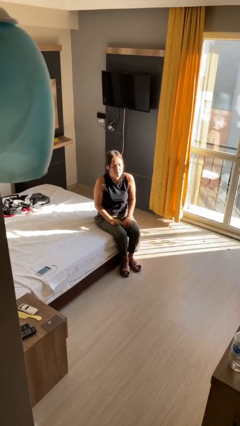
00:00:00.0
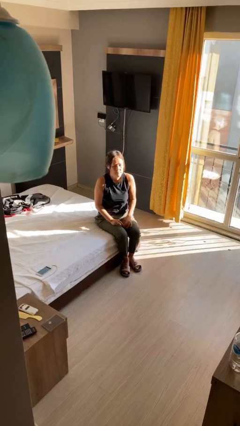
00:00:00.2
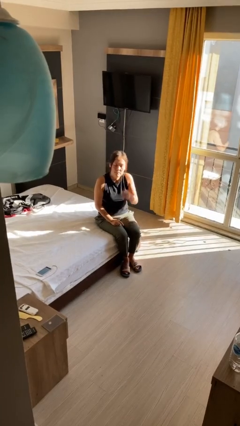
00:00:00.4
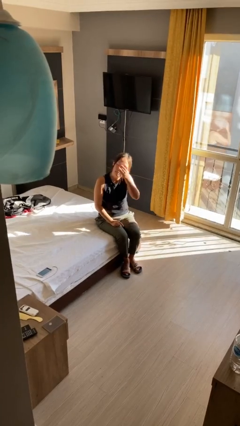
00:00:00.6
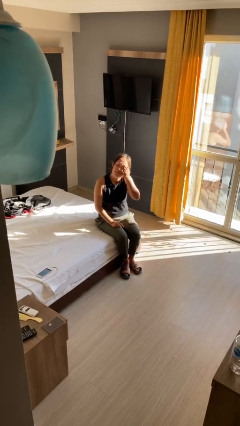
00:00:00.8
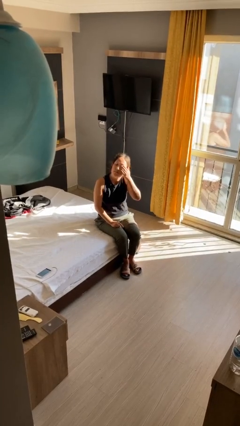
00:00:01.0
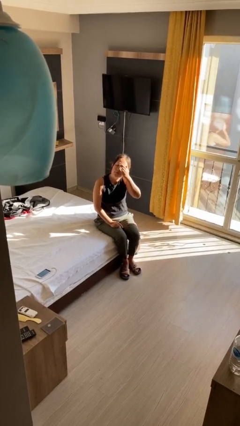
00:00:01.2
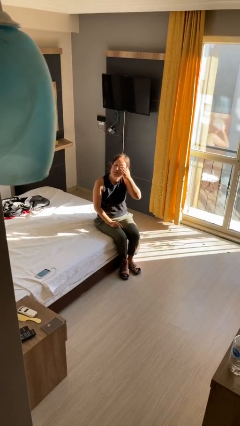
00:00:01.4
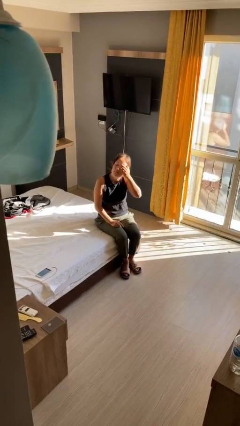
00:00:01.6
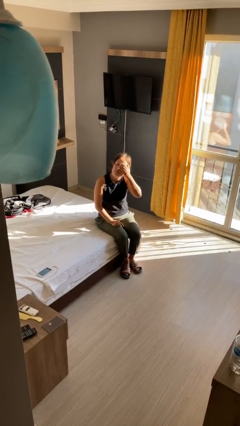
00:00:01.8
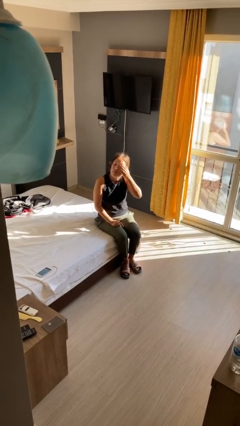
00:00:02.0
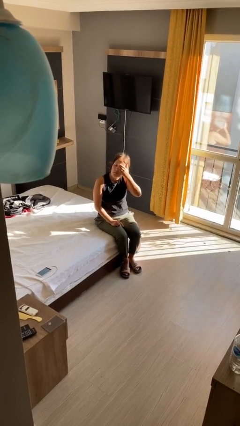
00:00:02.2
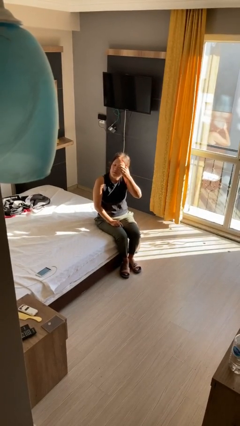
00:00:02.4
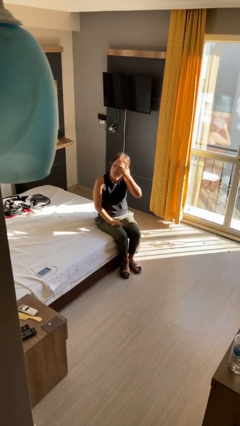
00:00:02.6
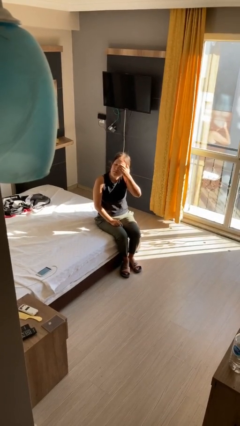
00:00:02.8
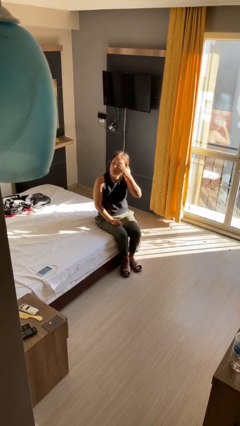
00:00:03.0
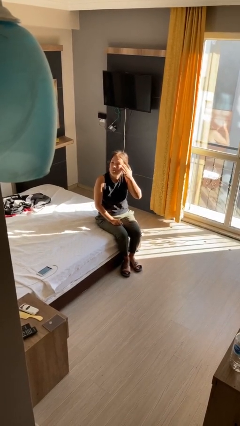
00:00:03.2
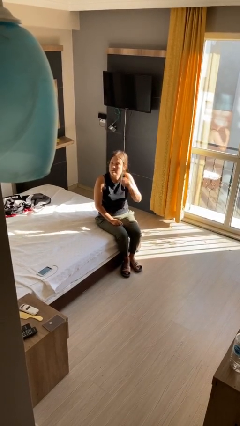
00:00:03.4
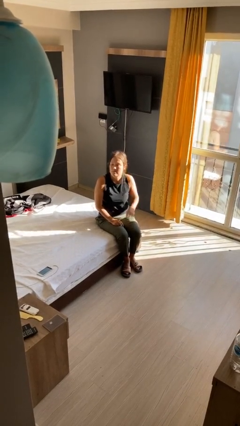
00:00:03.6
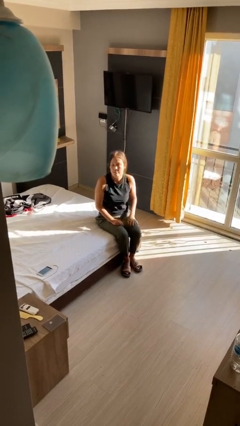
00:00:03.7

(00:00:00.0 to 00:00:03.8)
person rubs eyes

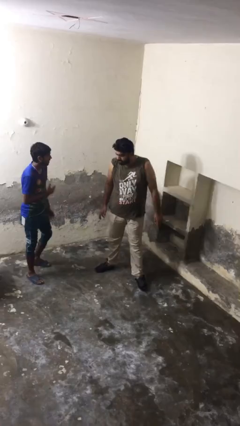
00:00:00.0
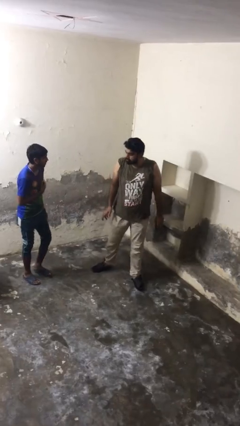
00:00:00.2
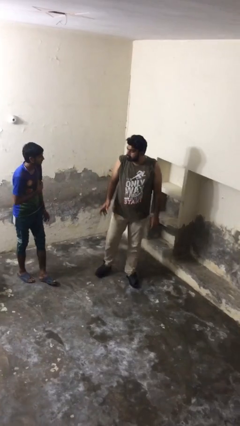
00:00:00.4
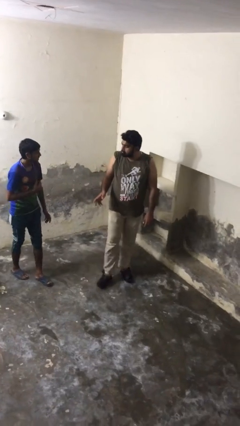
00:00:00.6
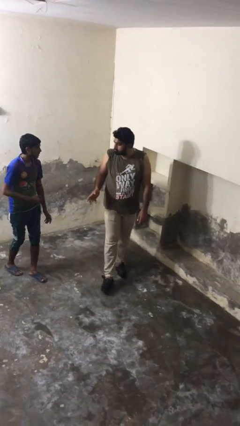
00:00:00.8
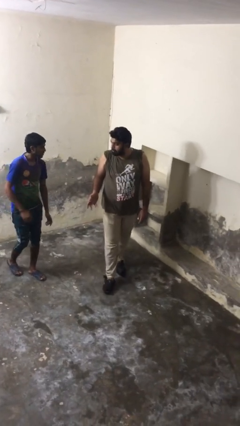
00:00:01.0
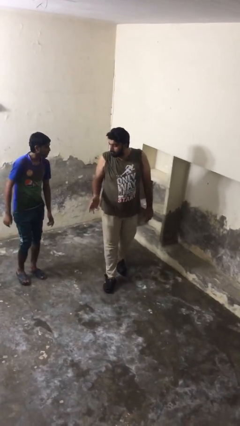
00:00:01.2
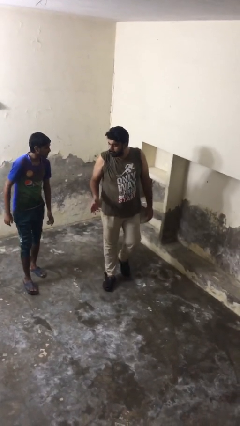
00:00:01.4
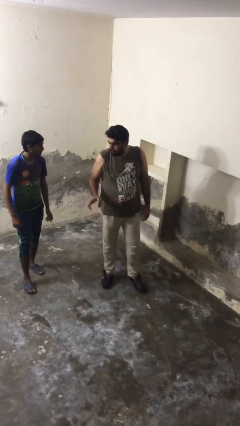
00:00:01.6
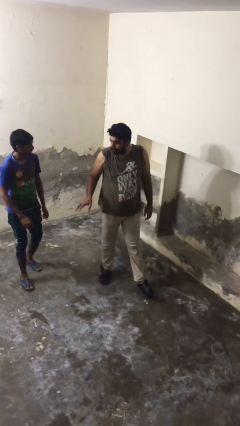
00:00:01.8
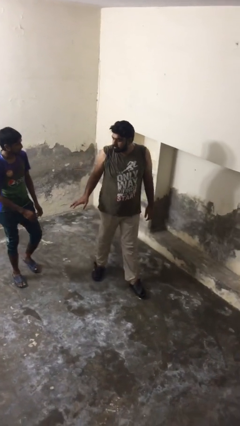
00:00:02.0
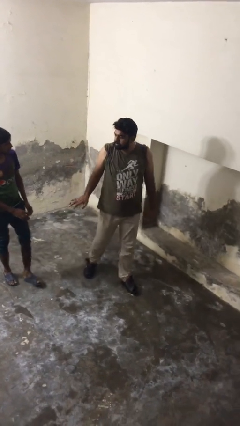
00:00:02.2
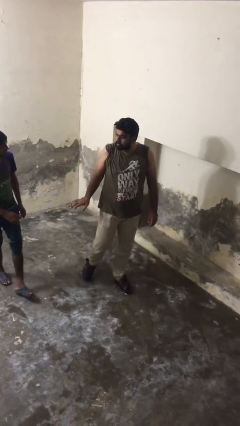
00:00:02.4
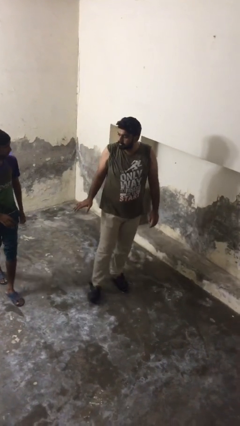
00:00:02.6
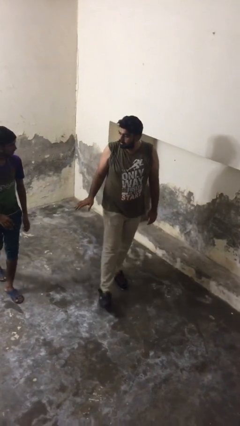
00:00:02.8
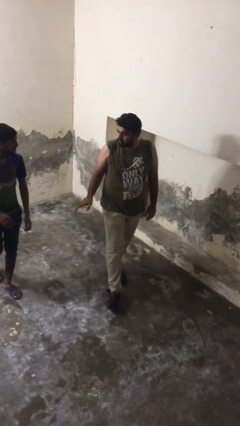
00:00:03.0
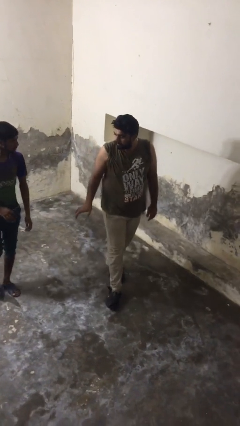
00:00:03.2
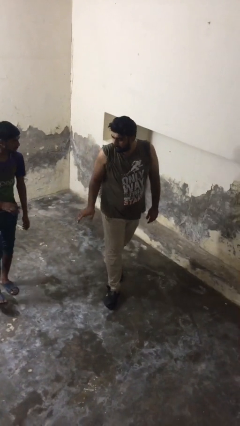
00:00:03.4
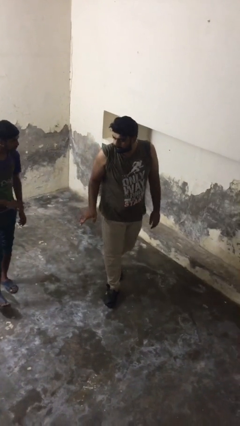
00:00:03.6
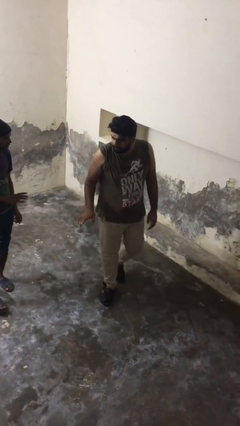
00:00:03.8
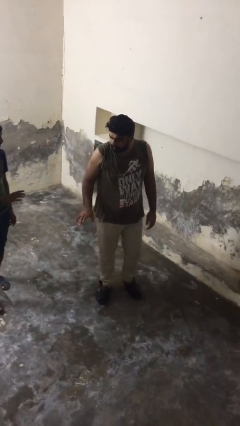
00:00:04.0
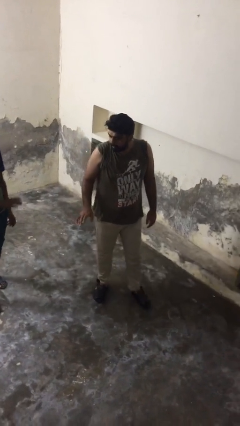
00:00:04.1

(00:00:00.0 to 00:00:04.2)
person talks to person

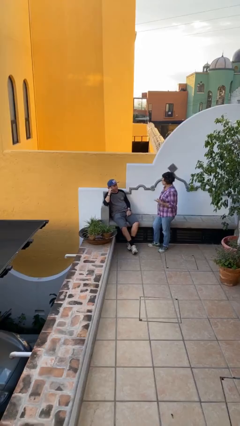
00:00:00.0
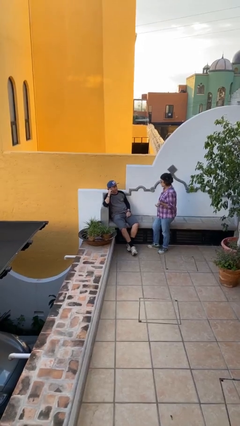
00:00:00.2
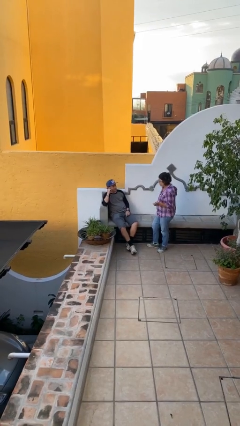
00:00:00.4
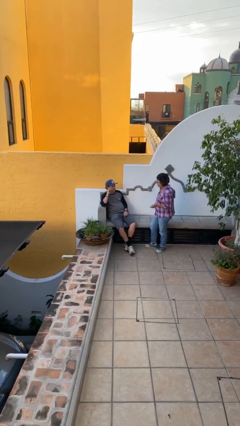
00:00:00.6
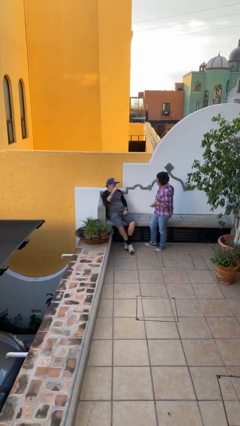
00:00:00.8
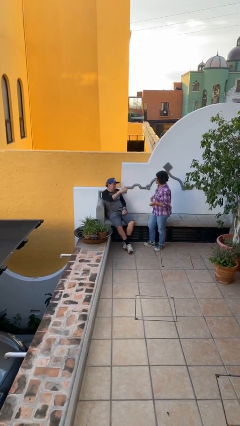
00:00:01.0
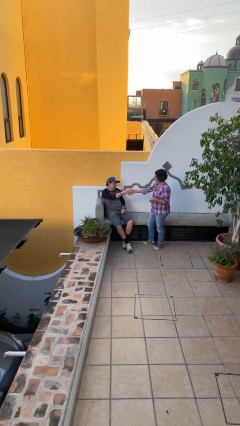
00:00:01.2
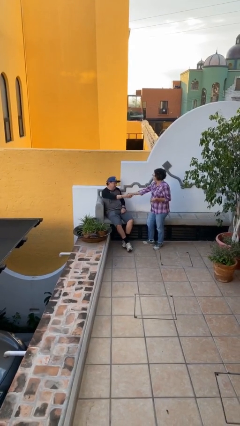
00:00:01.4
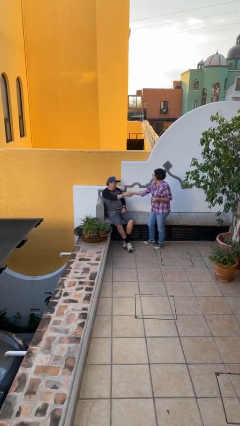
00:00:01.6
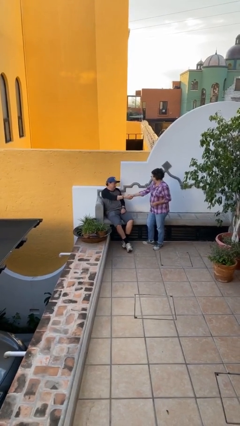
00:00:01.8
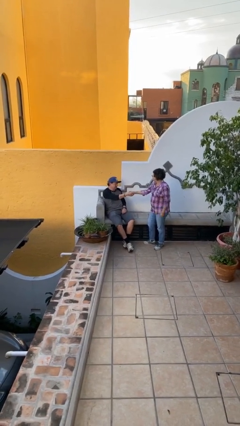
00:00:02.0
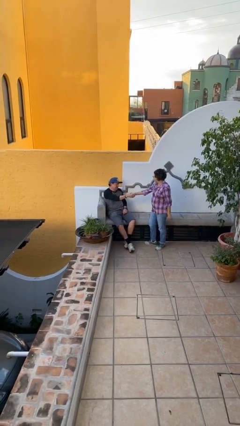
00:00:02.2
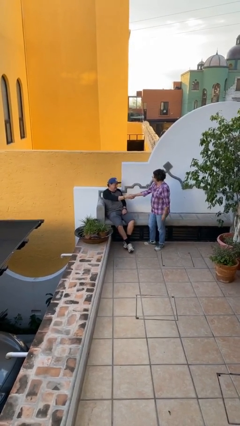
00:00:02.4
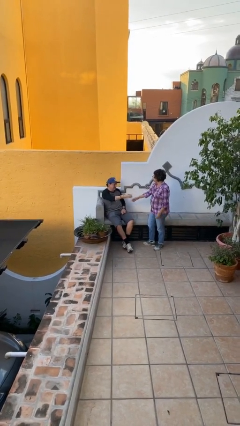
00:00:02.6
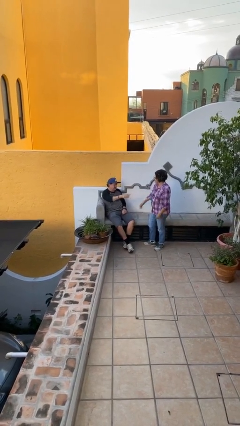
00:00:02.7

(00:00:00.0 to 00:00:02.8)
person shakes hand

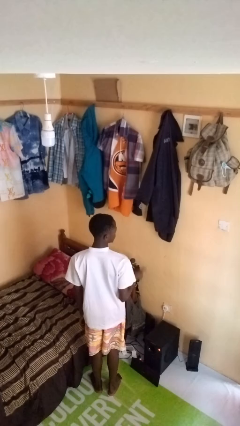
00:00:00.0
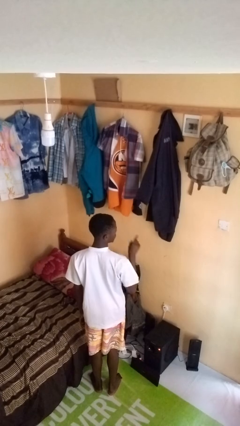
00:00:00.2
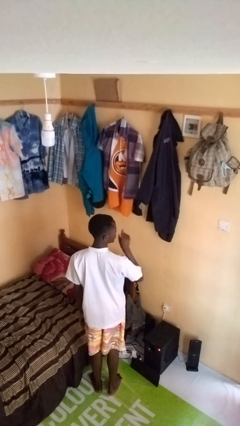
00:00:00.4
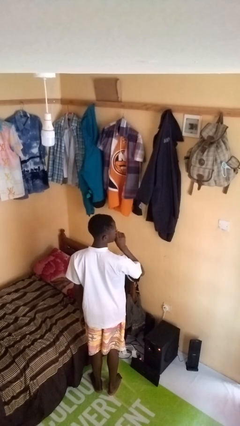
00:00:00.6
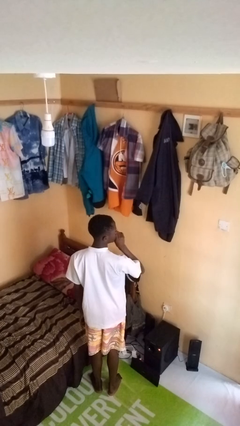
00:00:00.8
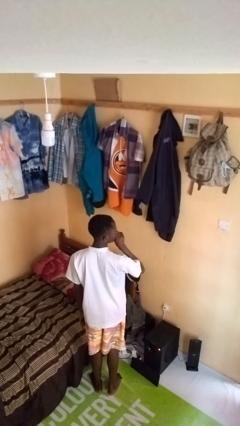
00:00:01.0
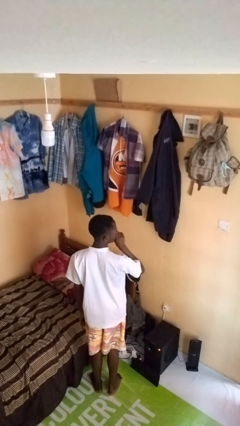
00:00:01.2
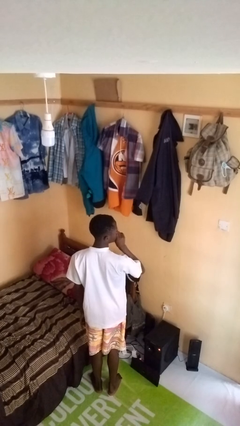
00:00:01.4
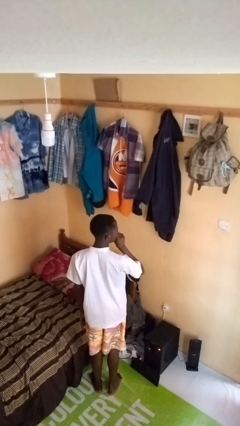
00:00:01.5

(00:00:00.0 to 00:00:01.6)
person gestures be quiet

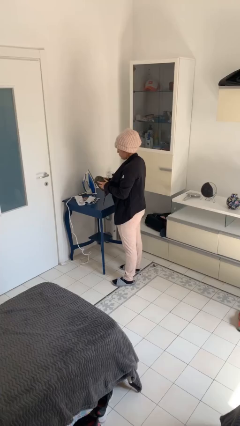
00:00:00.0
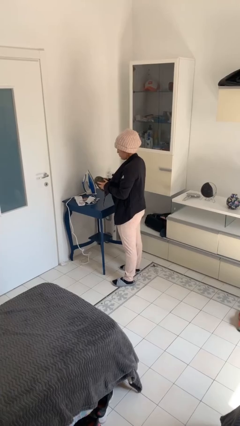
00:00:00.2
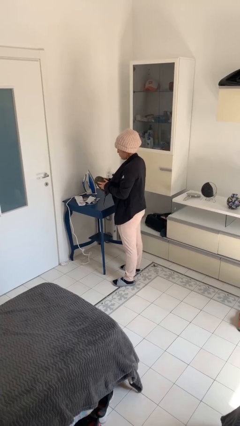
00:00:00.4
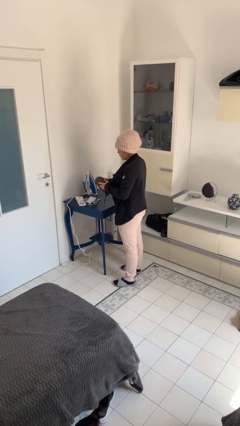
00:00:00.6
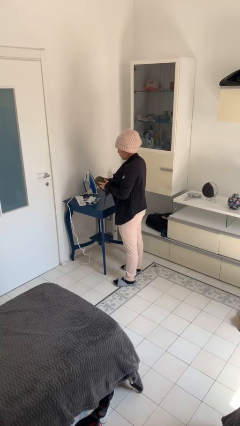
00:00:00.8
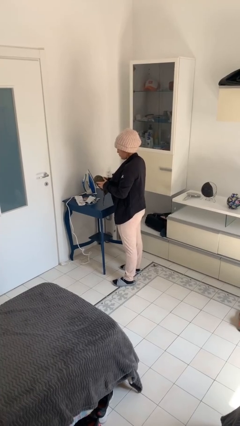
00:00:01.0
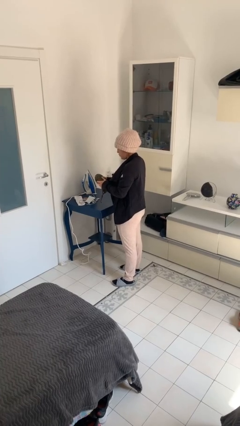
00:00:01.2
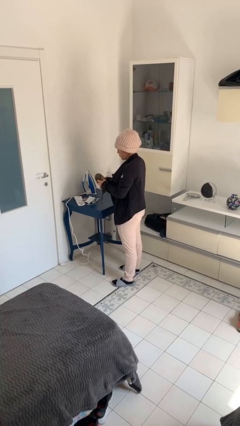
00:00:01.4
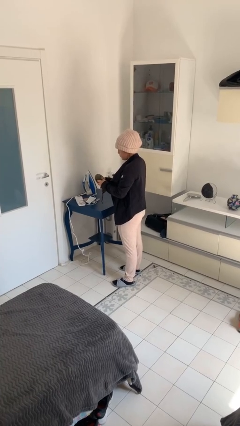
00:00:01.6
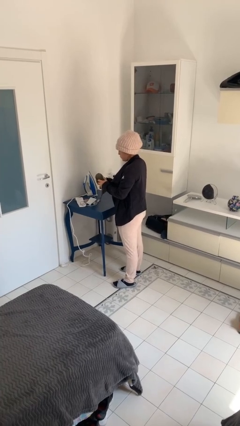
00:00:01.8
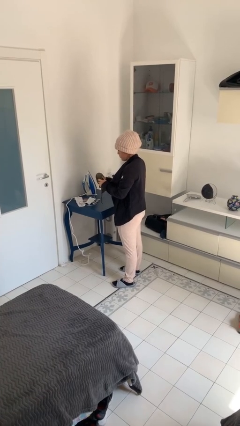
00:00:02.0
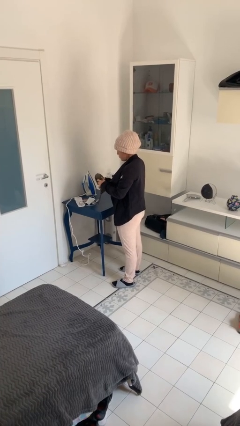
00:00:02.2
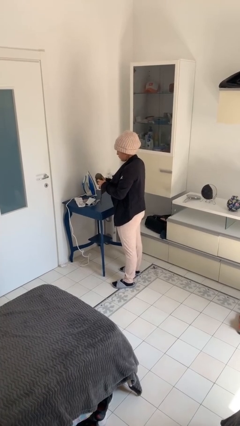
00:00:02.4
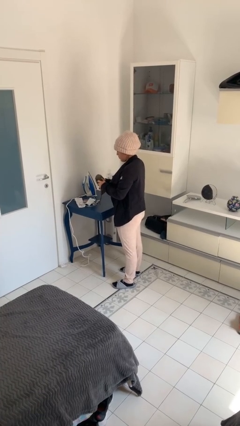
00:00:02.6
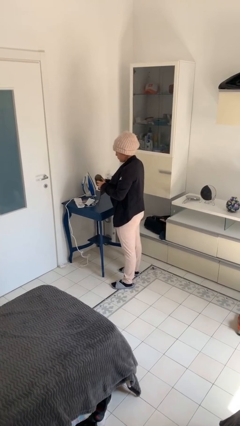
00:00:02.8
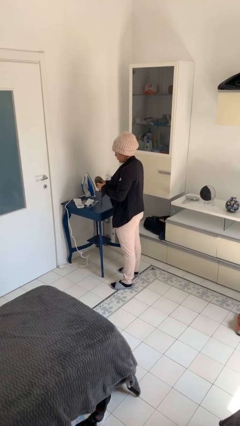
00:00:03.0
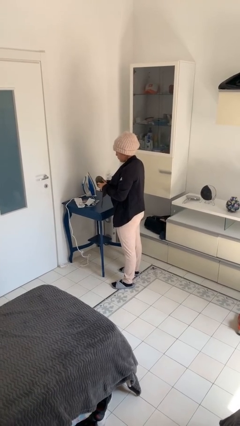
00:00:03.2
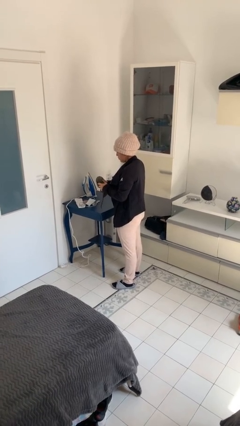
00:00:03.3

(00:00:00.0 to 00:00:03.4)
person squeezes object

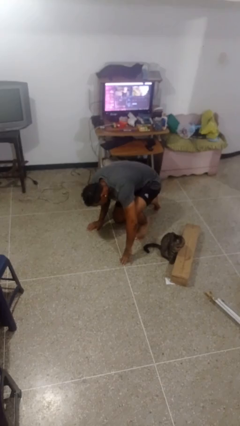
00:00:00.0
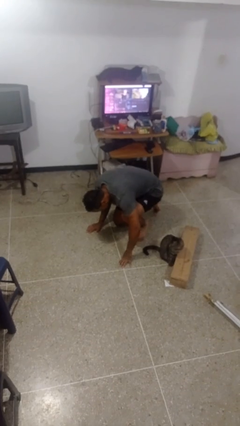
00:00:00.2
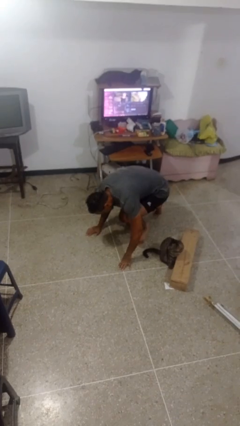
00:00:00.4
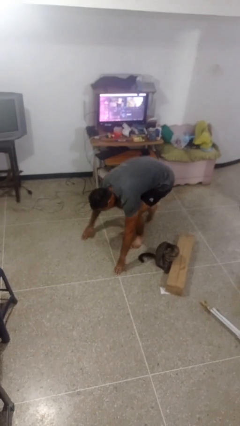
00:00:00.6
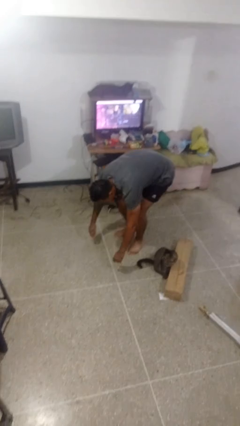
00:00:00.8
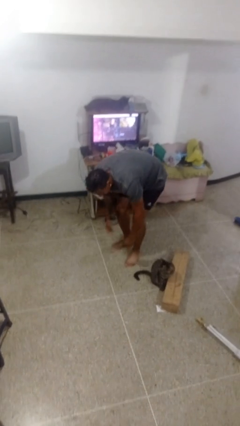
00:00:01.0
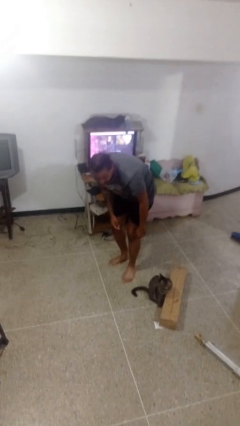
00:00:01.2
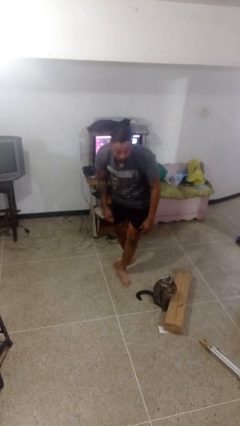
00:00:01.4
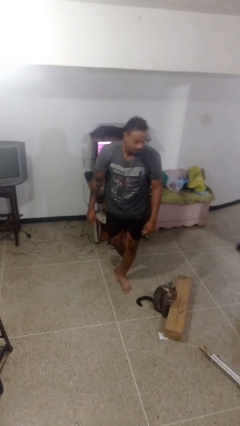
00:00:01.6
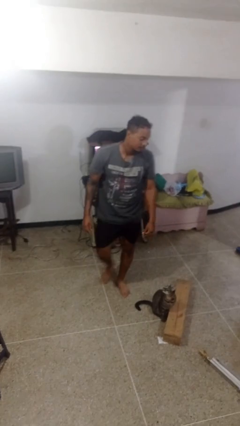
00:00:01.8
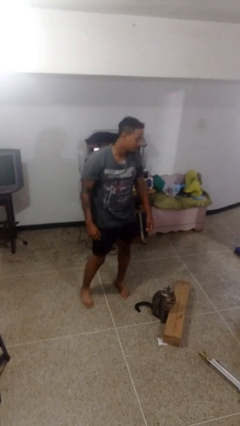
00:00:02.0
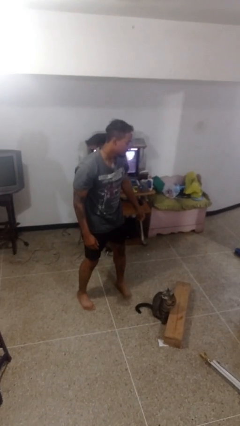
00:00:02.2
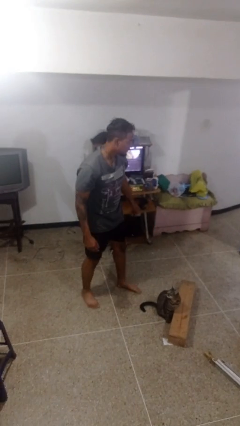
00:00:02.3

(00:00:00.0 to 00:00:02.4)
person stands up from floor
